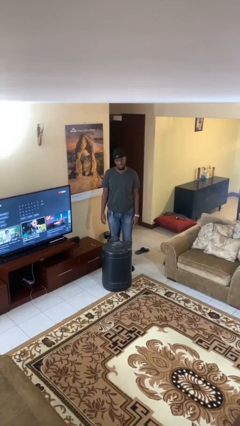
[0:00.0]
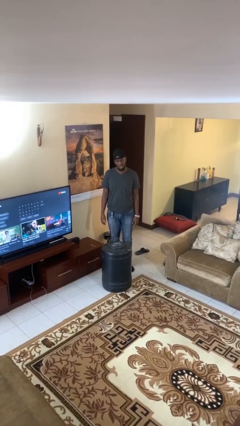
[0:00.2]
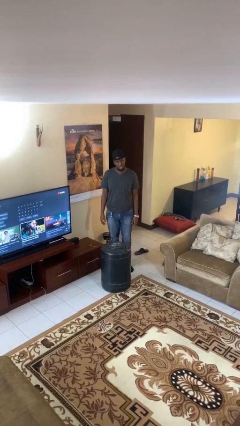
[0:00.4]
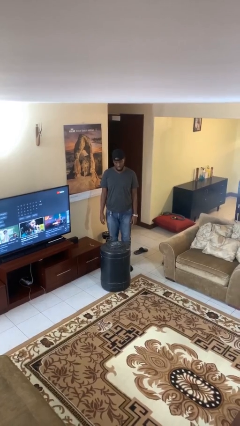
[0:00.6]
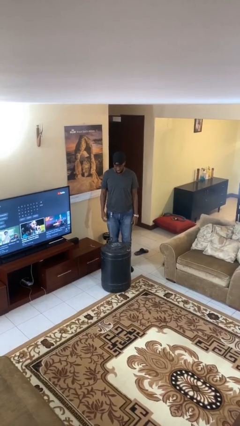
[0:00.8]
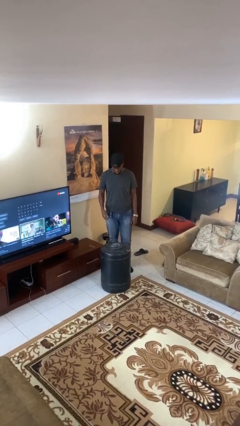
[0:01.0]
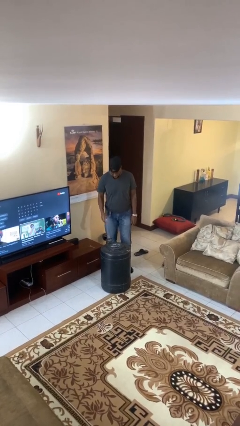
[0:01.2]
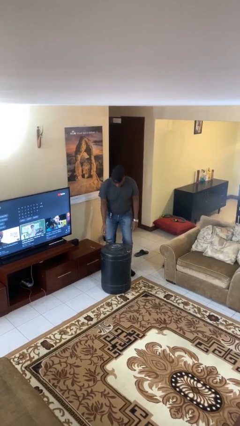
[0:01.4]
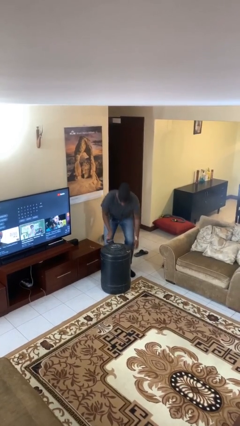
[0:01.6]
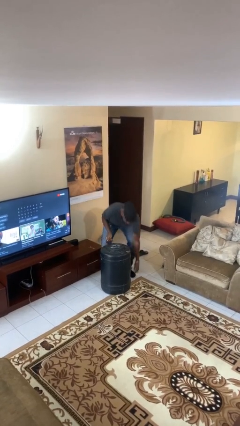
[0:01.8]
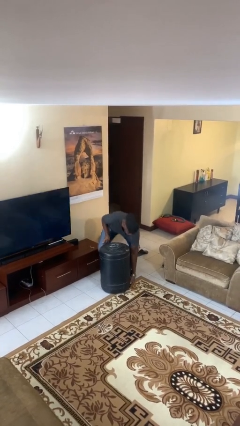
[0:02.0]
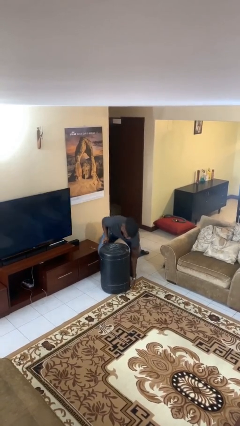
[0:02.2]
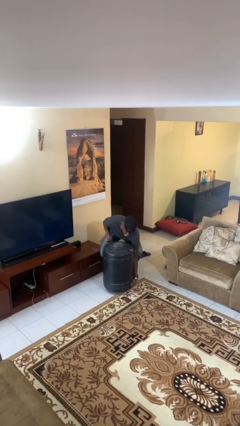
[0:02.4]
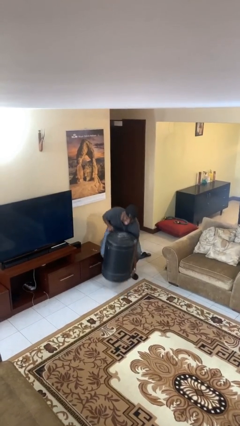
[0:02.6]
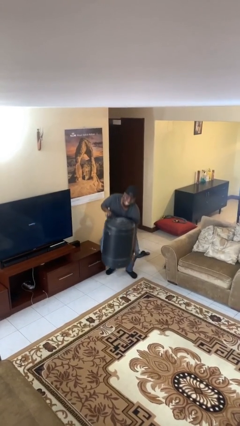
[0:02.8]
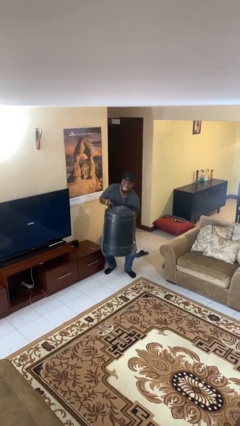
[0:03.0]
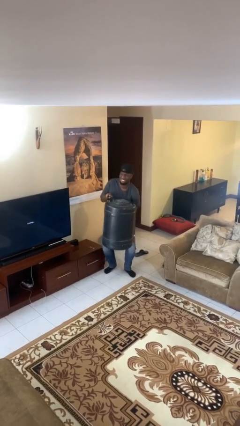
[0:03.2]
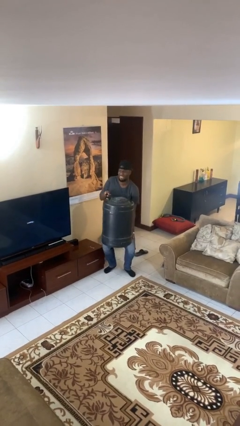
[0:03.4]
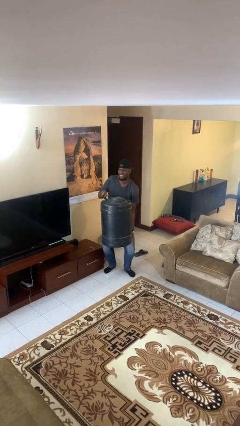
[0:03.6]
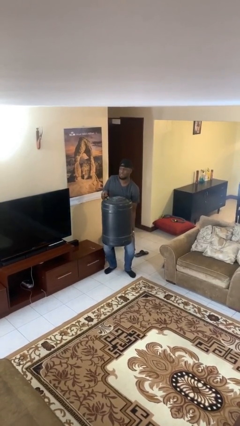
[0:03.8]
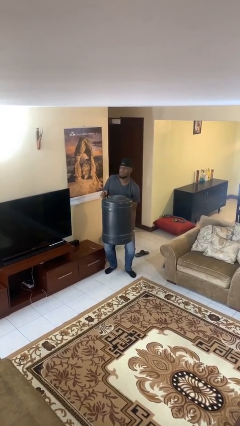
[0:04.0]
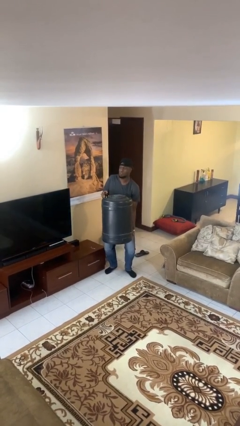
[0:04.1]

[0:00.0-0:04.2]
person picks up object from floor

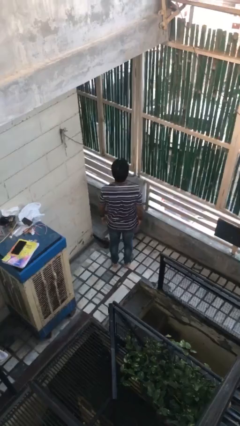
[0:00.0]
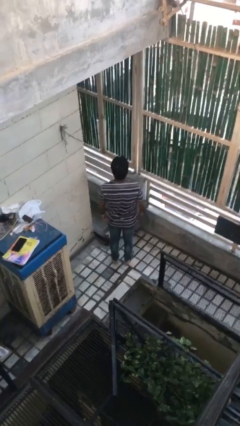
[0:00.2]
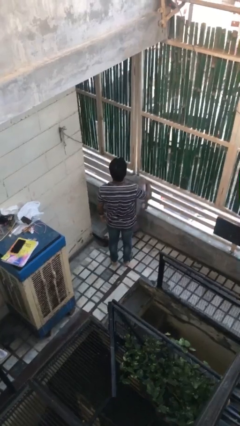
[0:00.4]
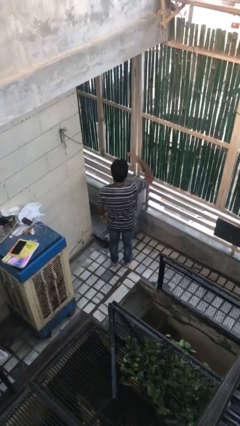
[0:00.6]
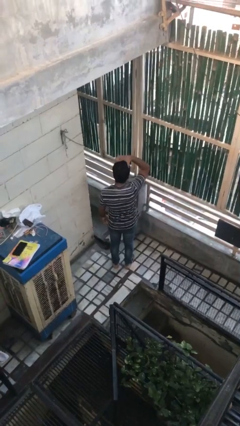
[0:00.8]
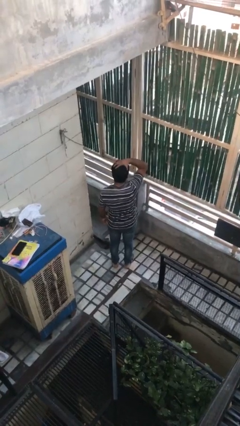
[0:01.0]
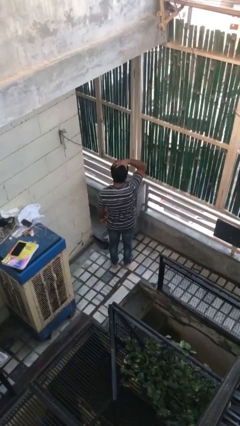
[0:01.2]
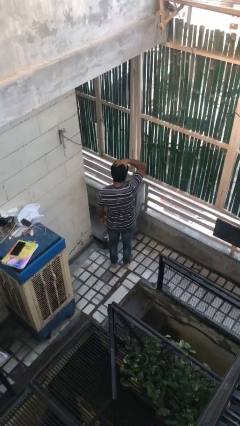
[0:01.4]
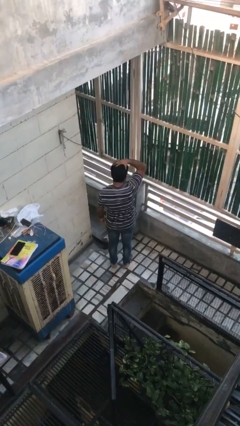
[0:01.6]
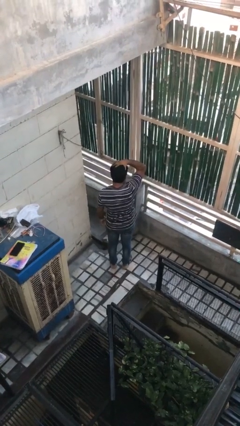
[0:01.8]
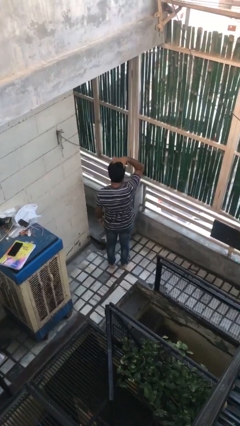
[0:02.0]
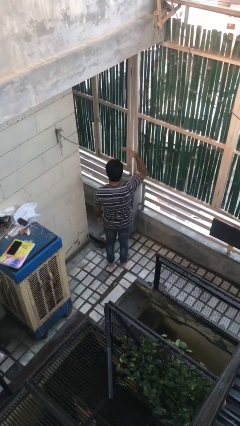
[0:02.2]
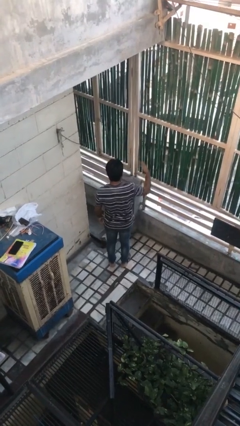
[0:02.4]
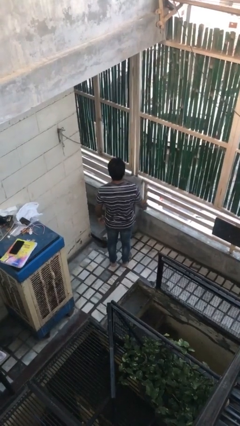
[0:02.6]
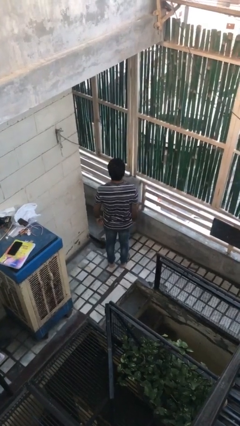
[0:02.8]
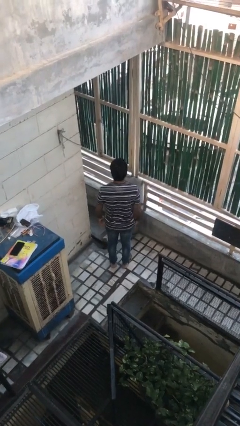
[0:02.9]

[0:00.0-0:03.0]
person pats head

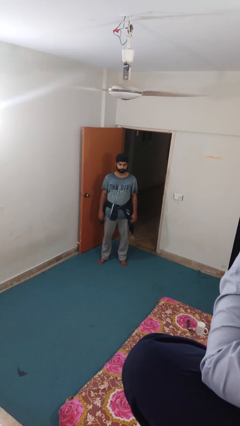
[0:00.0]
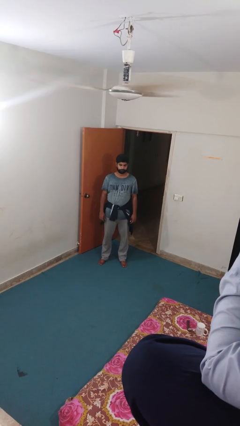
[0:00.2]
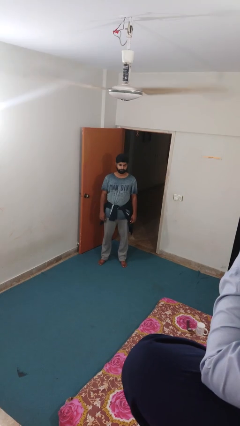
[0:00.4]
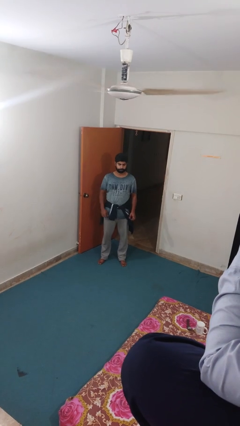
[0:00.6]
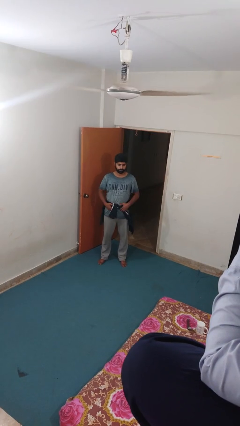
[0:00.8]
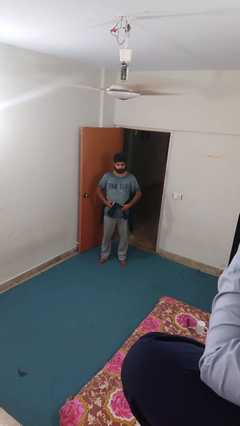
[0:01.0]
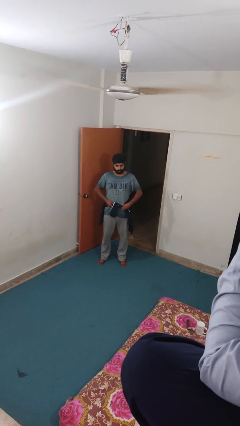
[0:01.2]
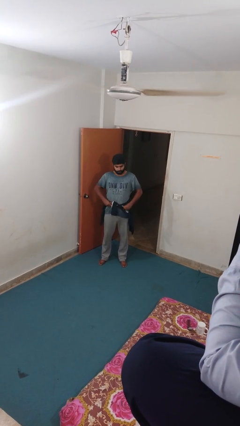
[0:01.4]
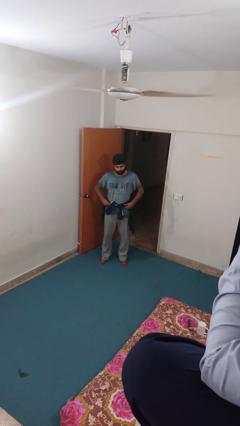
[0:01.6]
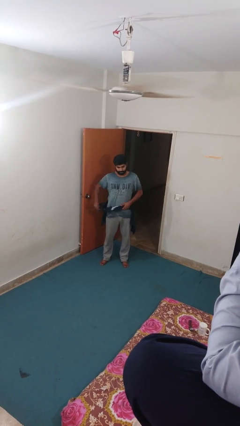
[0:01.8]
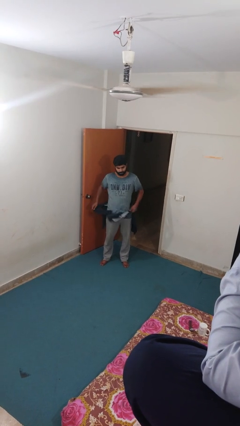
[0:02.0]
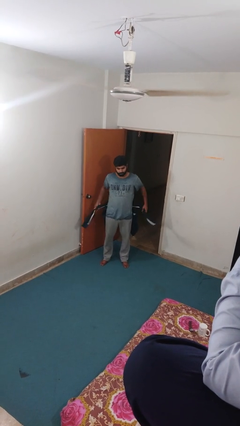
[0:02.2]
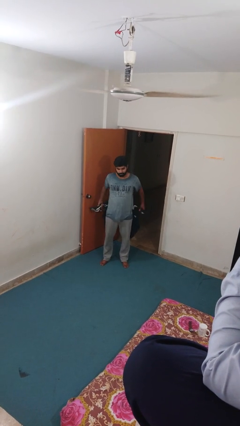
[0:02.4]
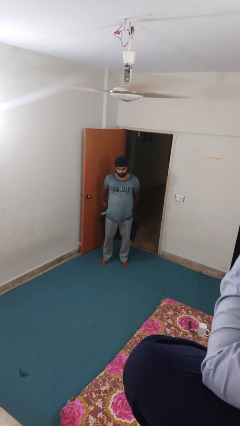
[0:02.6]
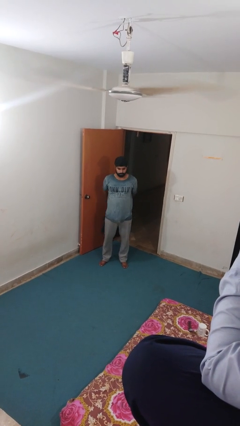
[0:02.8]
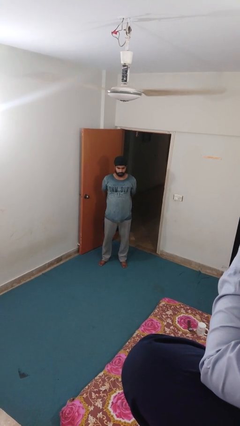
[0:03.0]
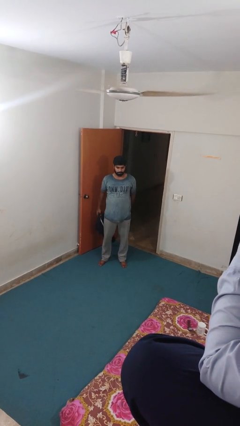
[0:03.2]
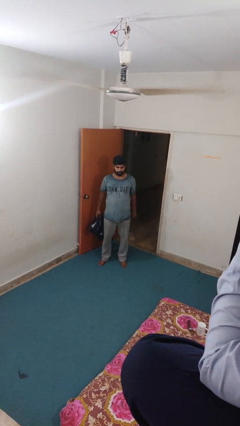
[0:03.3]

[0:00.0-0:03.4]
person unties jacket around waist

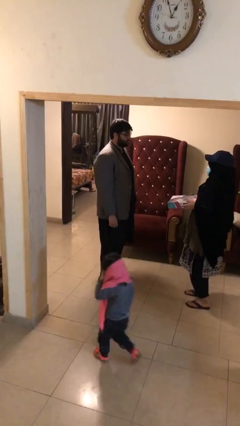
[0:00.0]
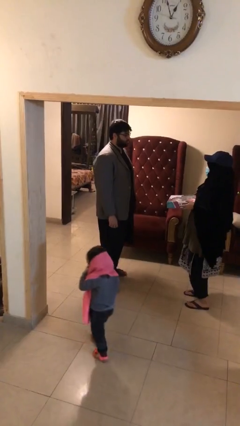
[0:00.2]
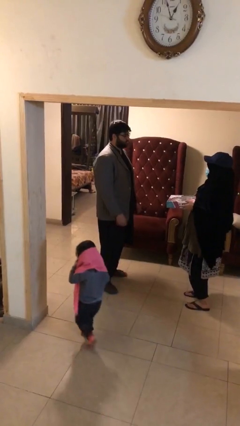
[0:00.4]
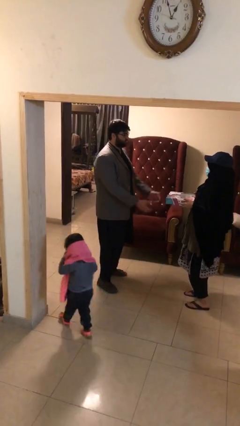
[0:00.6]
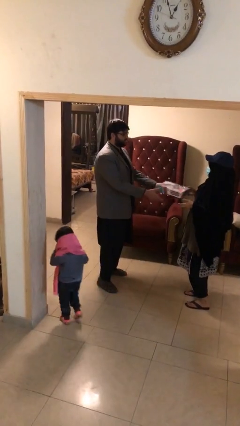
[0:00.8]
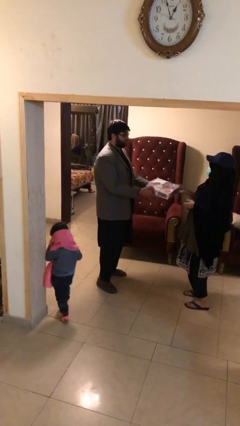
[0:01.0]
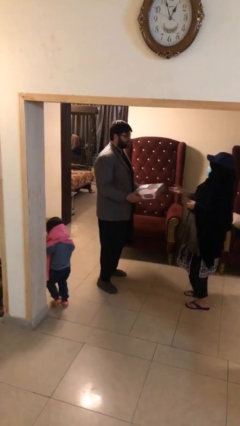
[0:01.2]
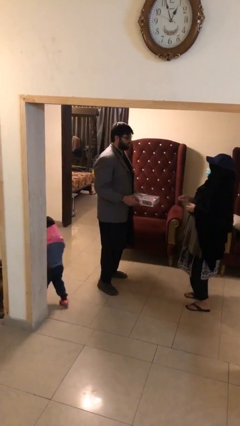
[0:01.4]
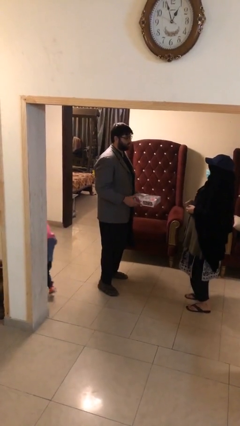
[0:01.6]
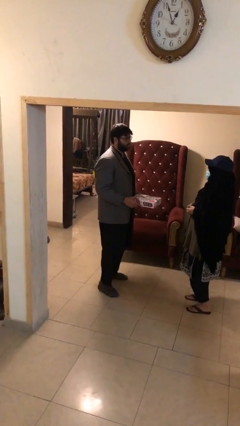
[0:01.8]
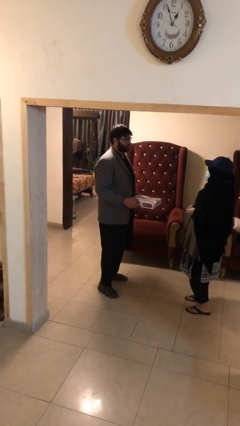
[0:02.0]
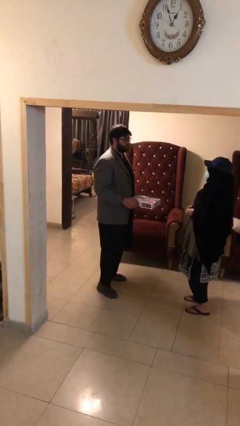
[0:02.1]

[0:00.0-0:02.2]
person transfers object to person

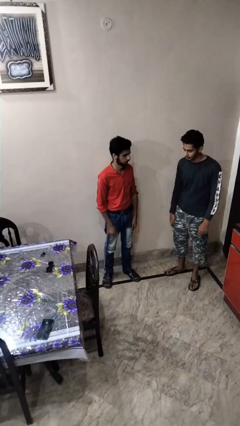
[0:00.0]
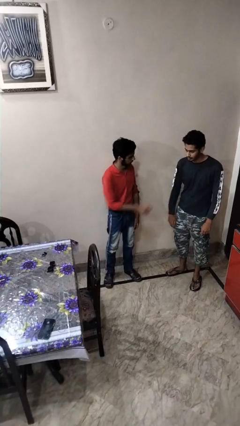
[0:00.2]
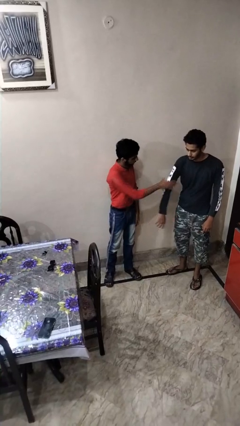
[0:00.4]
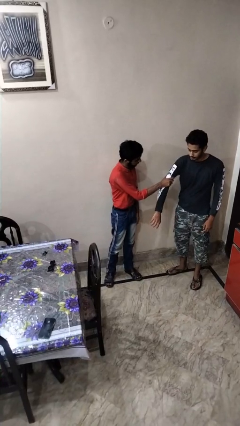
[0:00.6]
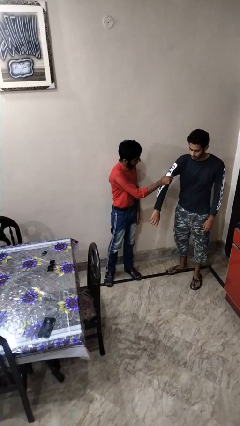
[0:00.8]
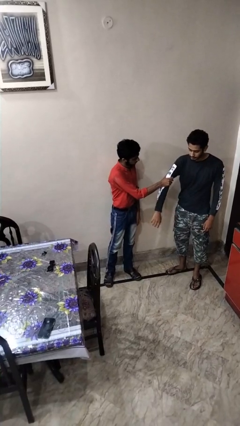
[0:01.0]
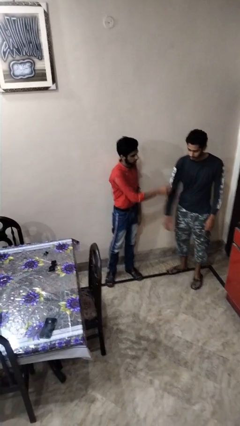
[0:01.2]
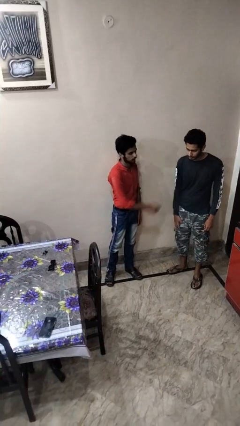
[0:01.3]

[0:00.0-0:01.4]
person grabs person by bicep

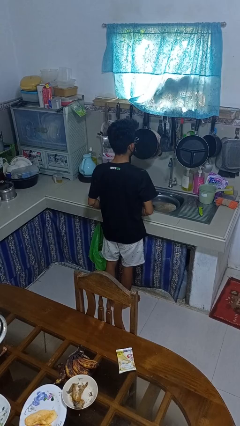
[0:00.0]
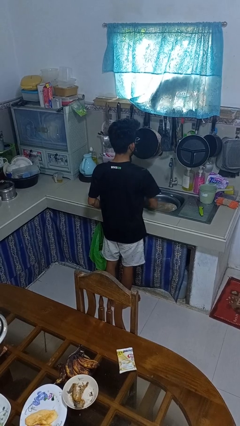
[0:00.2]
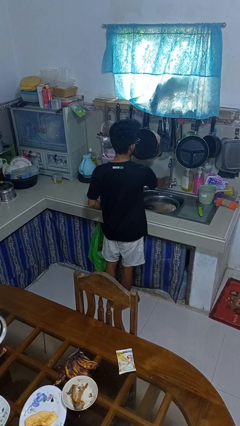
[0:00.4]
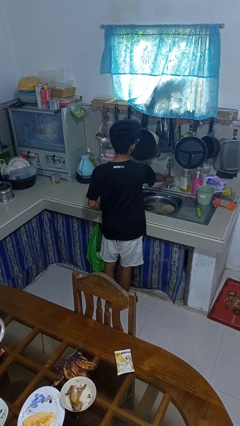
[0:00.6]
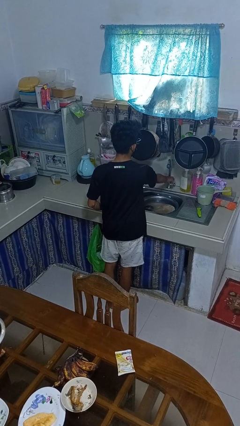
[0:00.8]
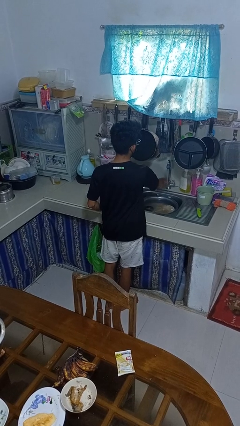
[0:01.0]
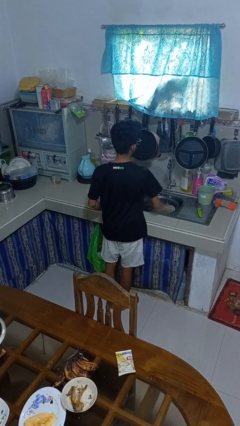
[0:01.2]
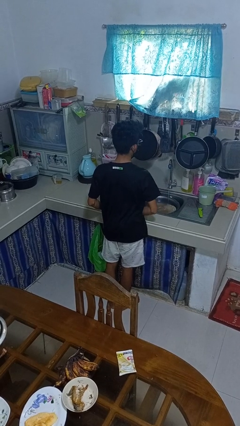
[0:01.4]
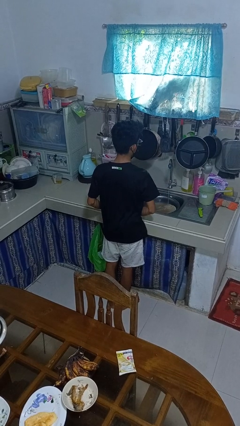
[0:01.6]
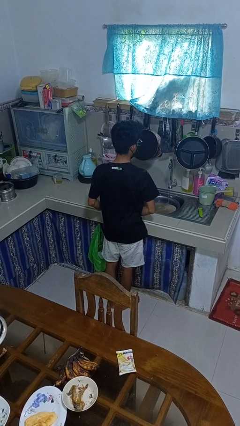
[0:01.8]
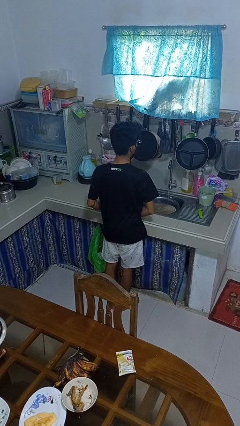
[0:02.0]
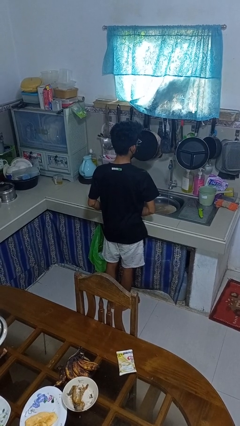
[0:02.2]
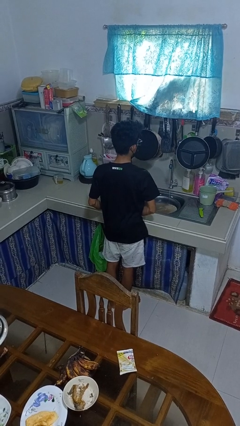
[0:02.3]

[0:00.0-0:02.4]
person turns on faucet

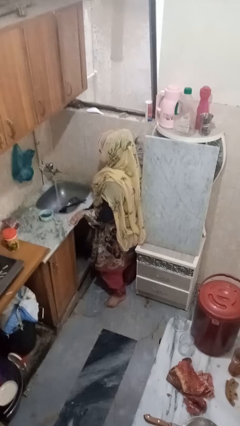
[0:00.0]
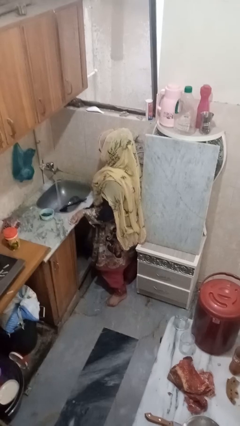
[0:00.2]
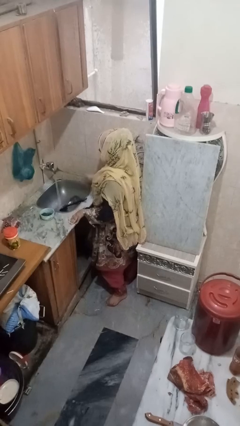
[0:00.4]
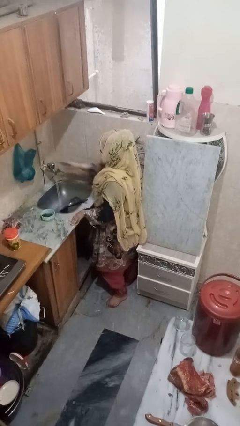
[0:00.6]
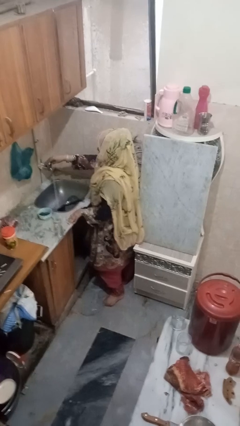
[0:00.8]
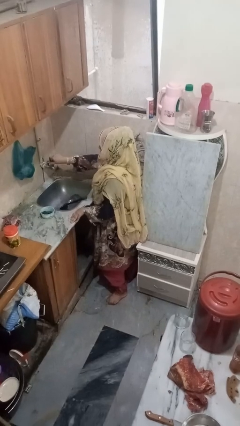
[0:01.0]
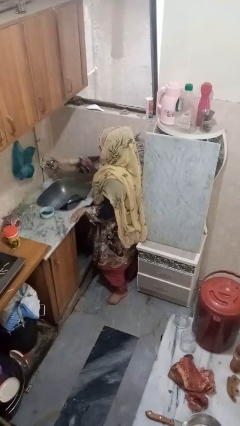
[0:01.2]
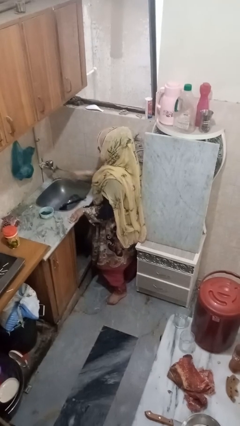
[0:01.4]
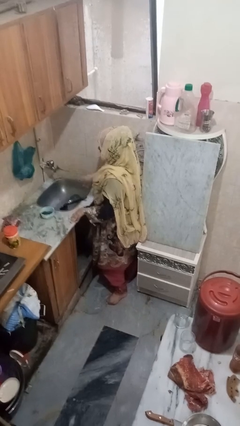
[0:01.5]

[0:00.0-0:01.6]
person turns off faucet
